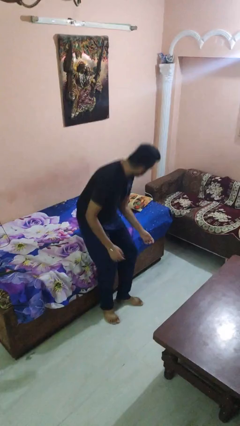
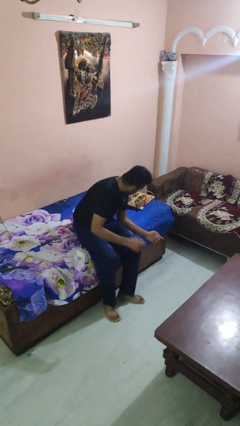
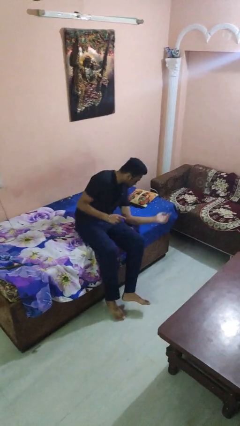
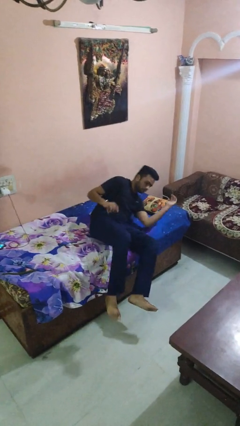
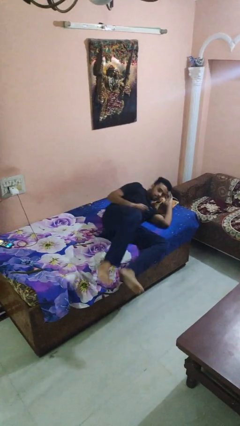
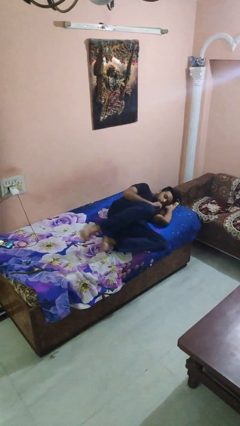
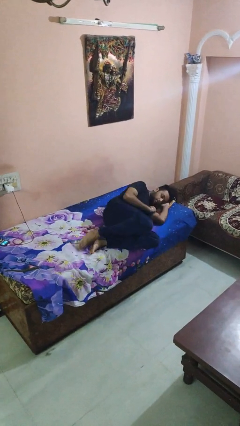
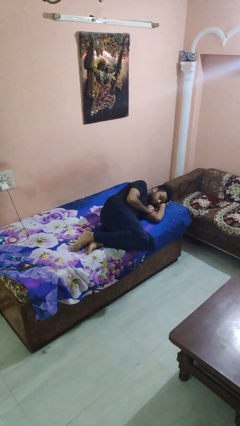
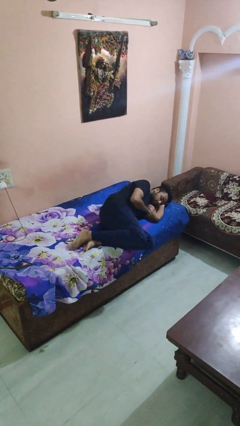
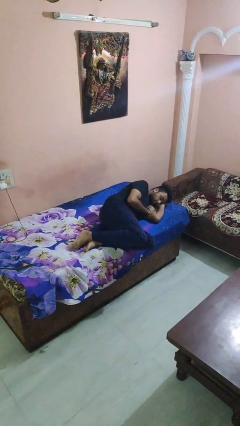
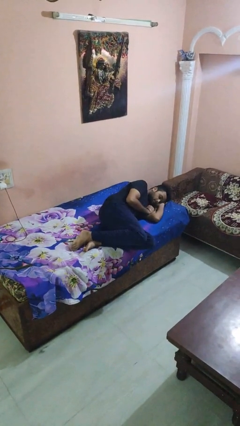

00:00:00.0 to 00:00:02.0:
person lies down on bed

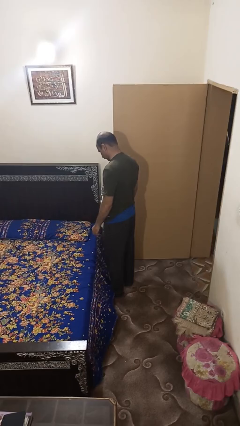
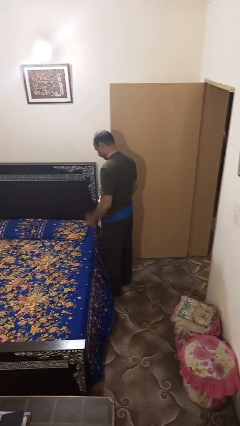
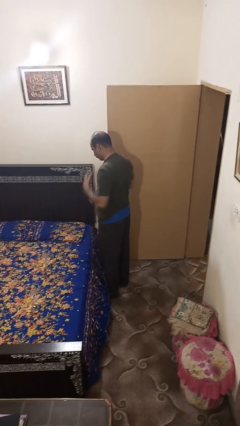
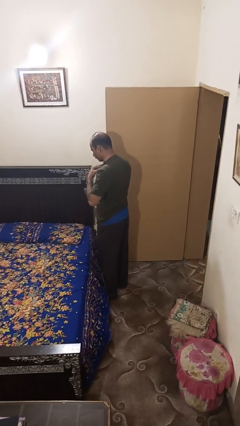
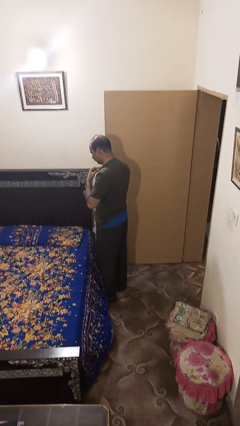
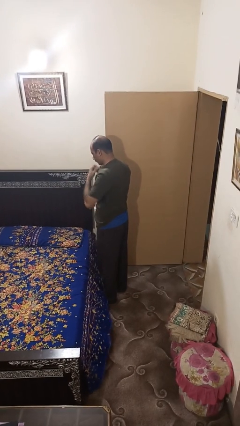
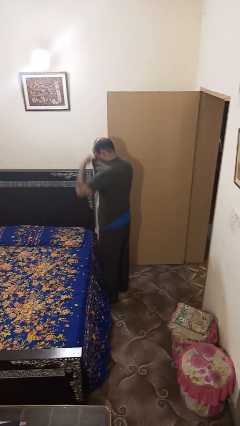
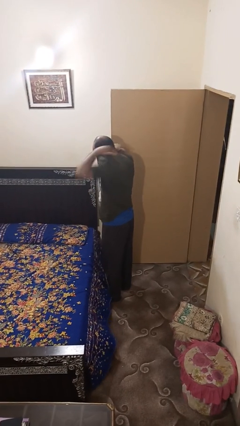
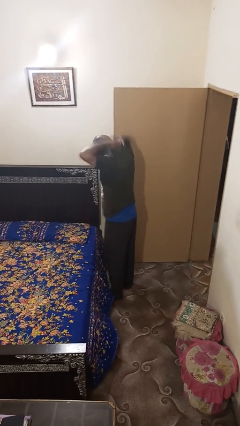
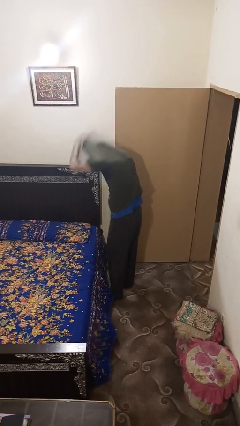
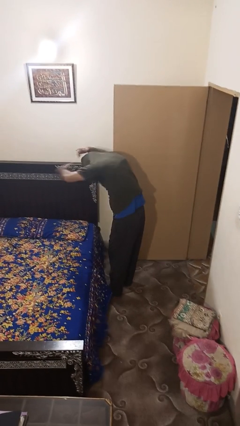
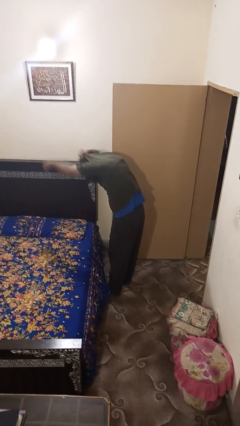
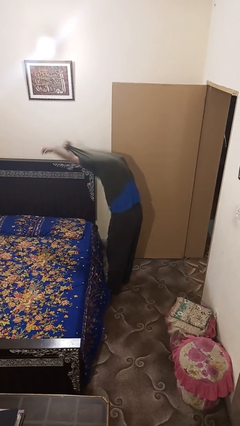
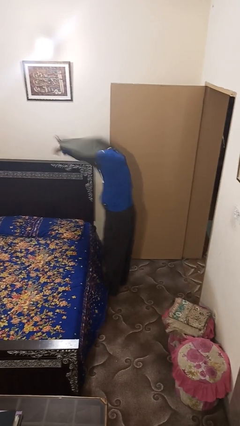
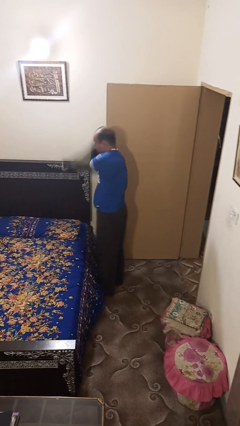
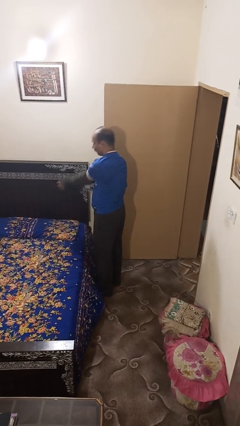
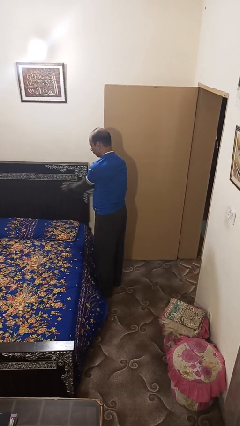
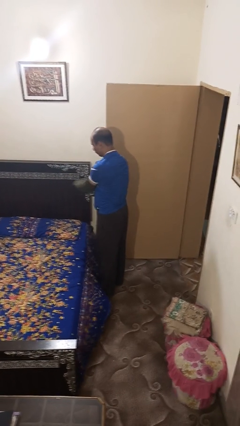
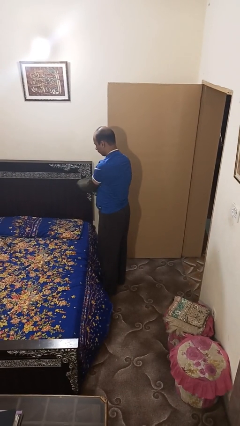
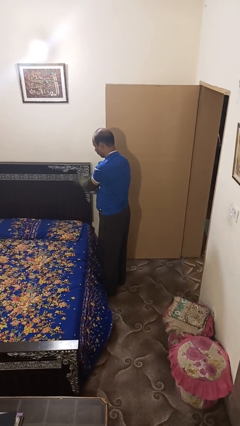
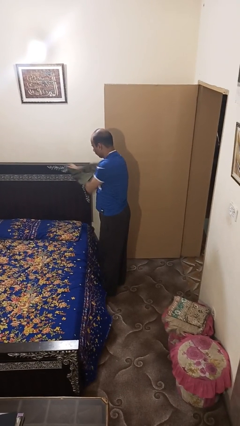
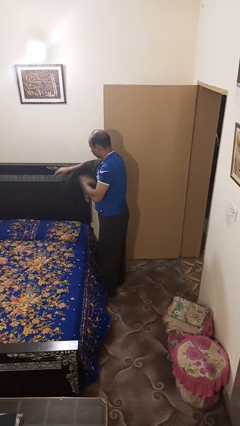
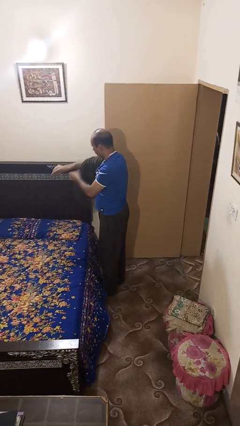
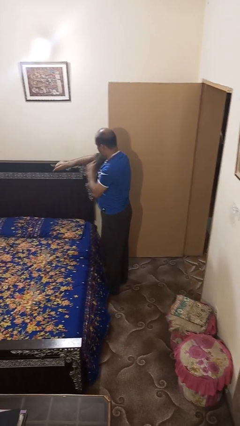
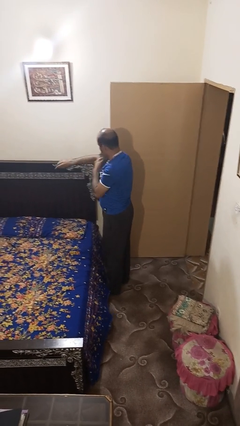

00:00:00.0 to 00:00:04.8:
person takes off shirt

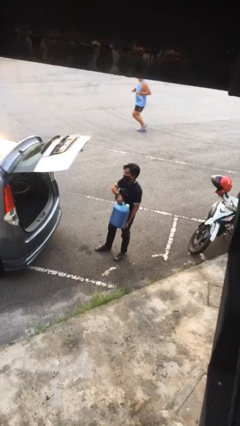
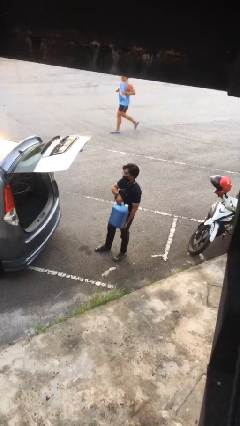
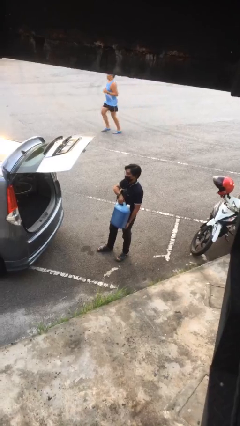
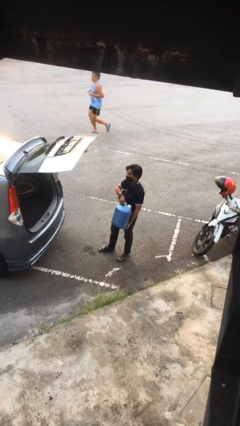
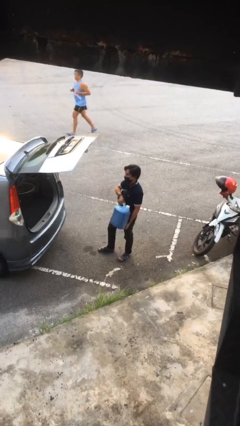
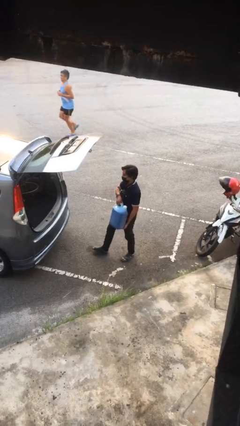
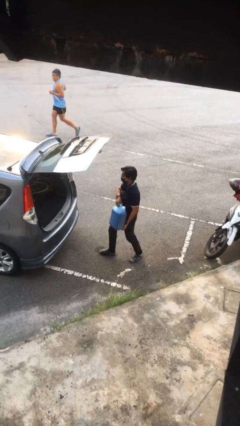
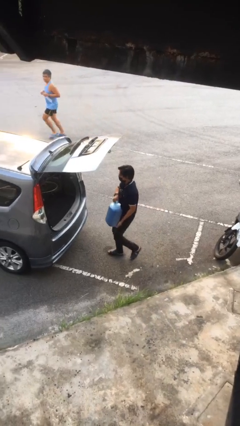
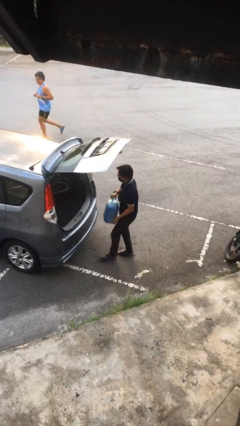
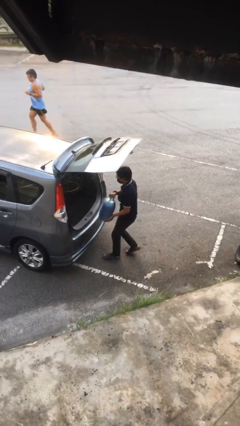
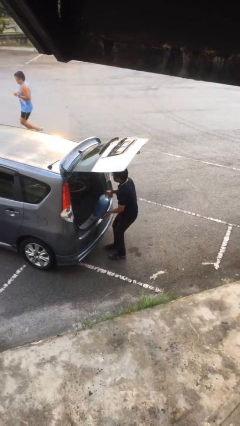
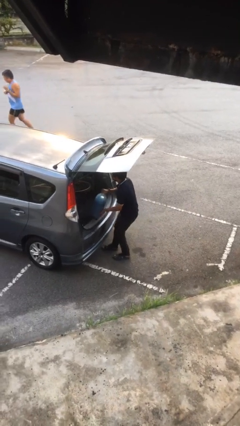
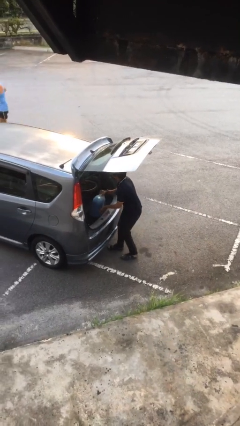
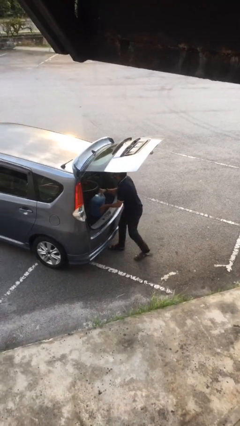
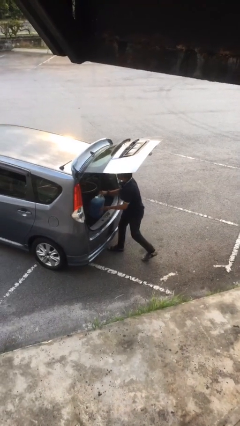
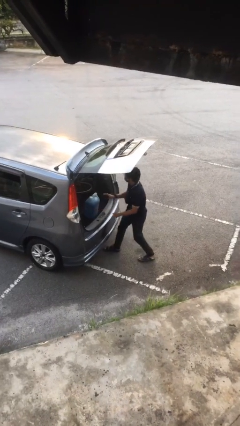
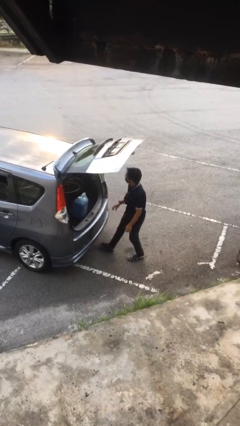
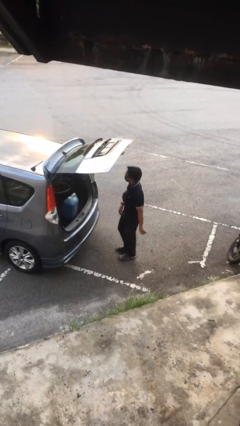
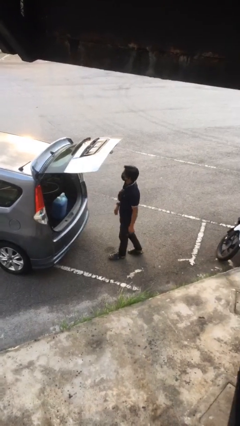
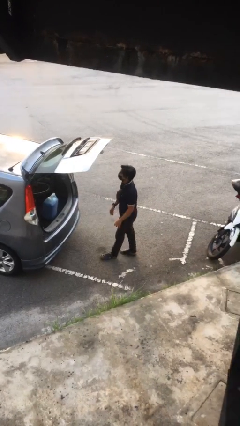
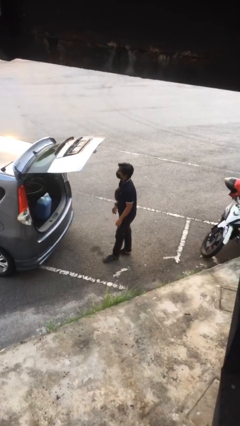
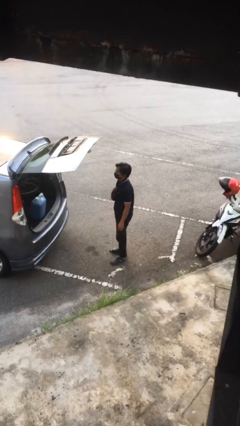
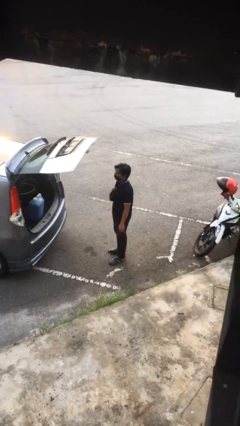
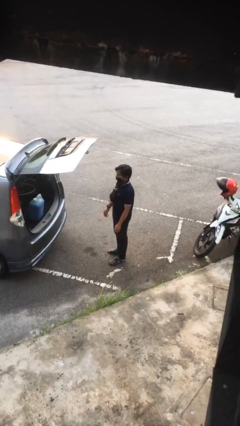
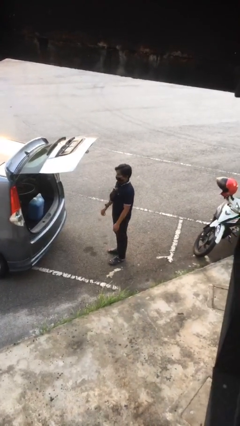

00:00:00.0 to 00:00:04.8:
person loads car

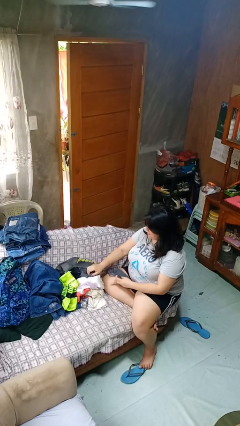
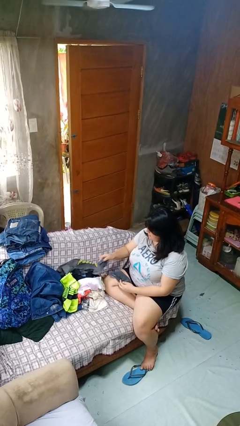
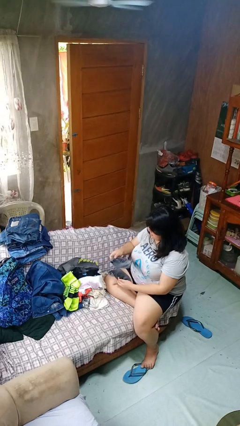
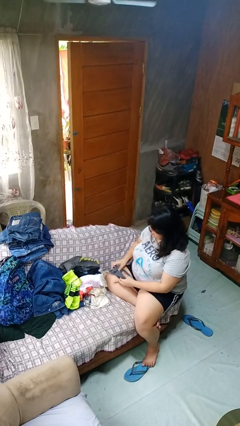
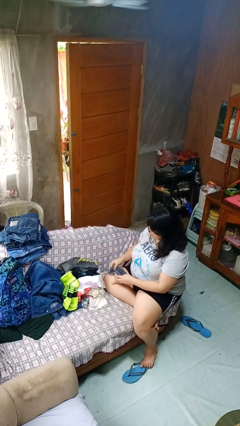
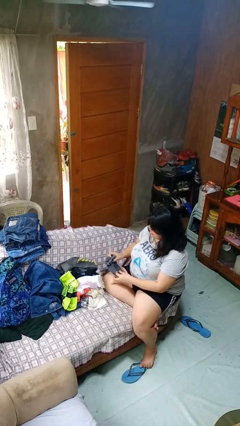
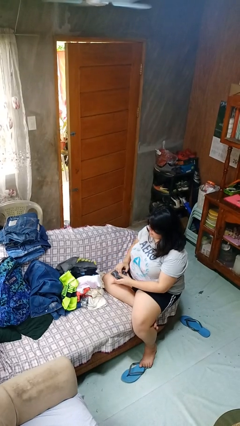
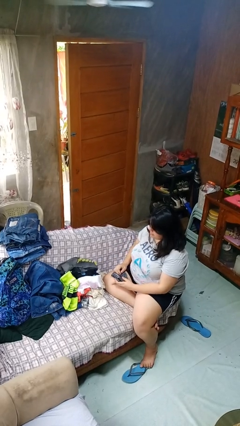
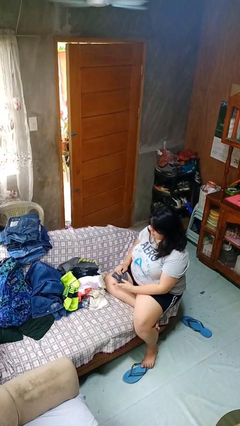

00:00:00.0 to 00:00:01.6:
person folds socks

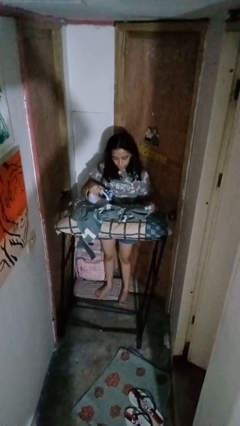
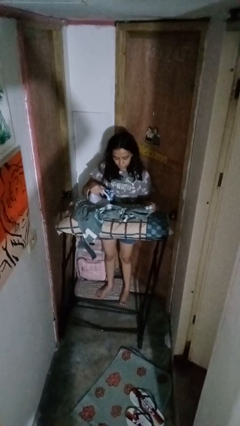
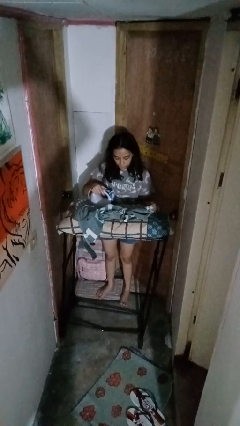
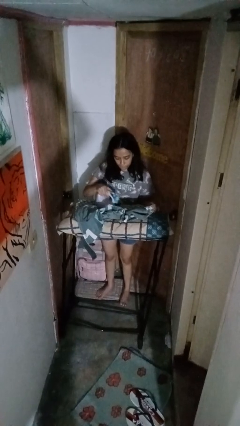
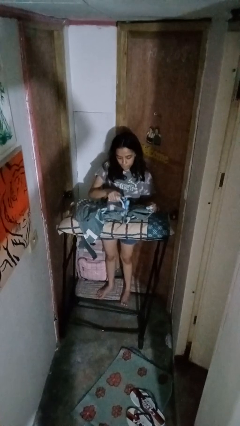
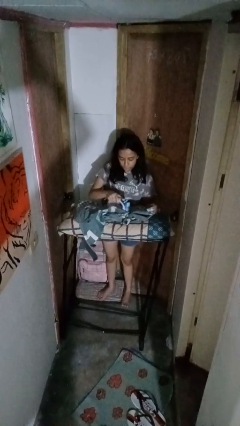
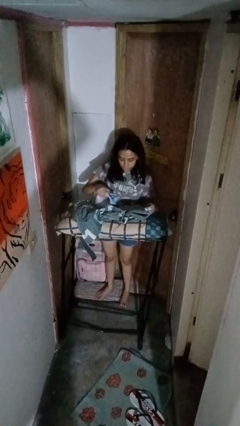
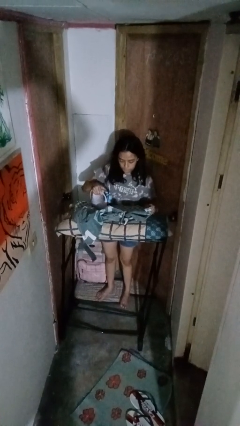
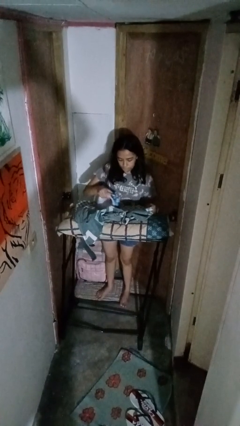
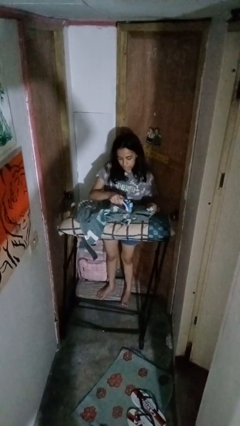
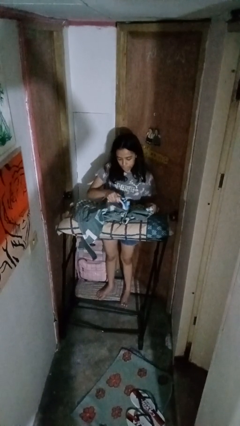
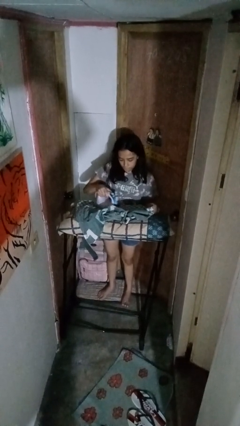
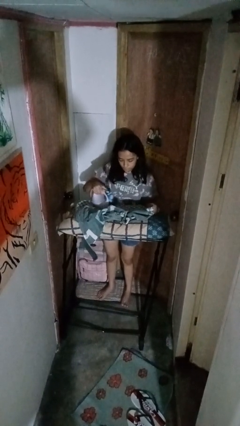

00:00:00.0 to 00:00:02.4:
person irons clothes

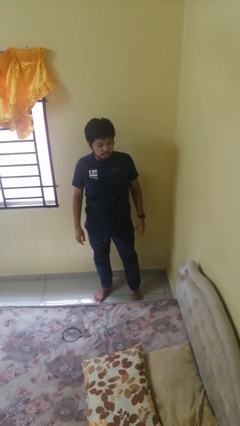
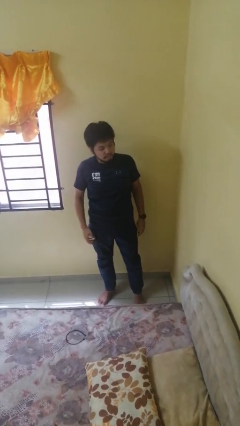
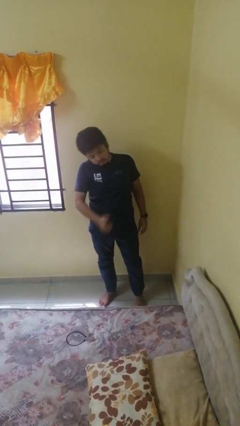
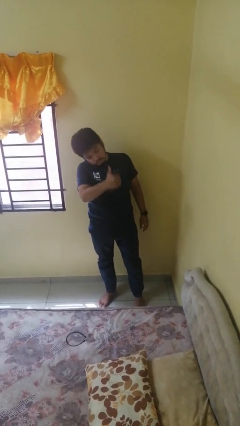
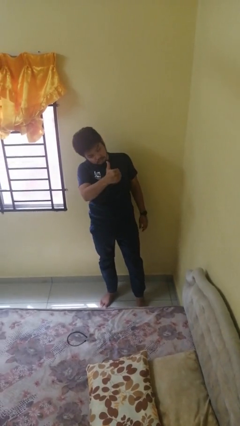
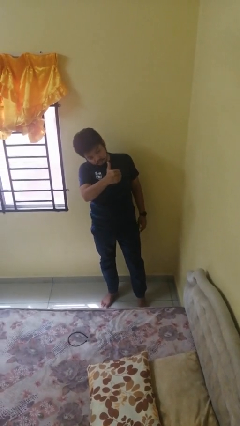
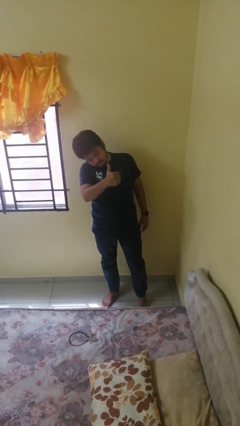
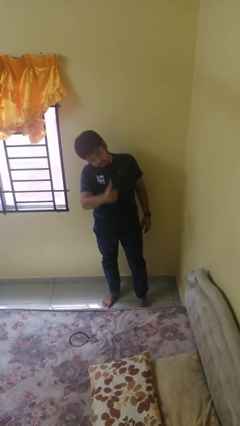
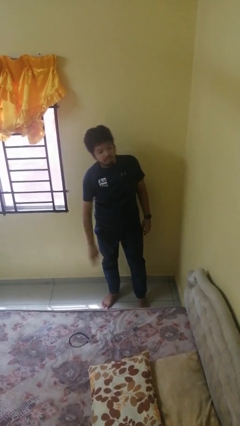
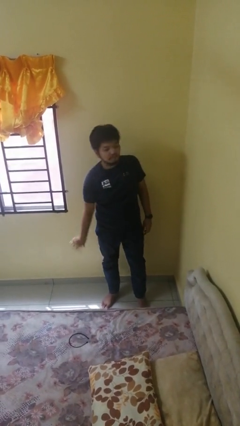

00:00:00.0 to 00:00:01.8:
person gestures thumbs up
